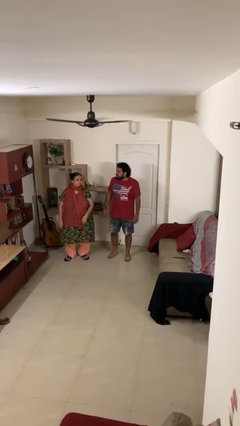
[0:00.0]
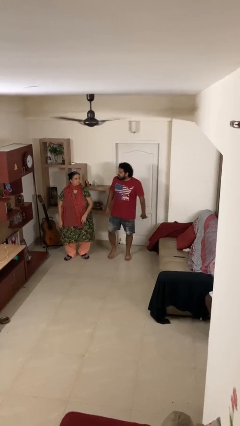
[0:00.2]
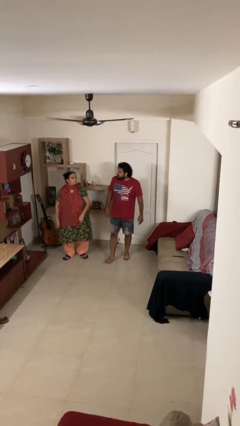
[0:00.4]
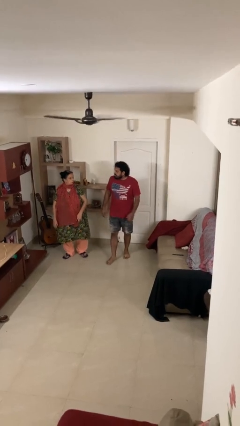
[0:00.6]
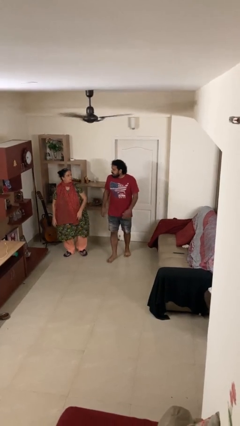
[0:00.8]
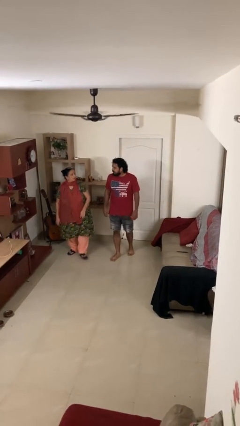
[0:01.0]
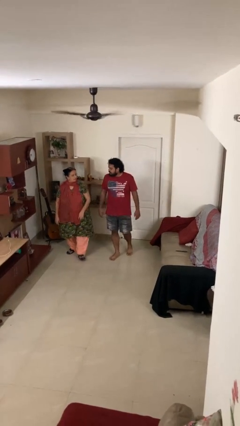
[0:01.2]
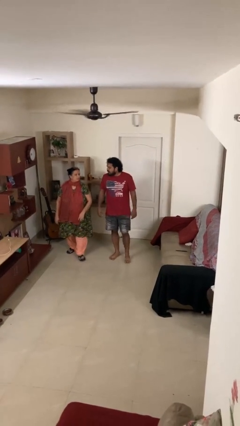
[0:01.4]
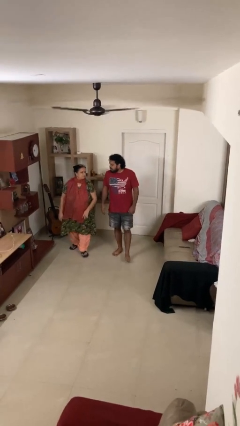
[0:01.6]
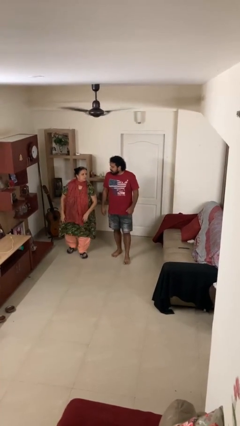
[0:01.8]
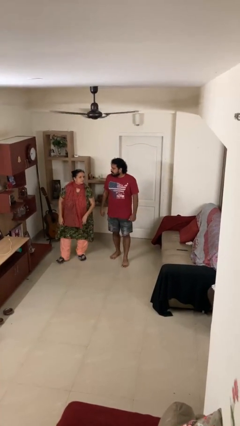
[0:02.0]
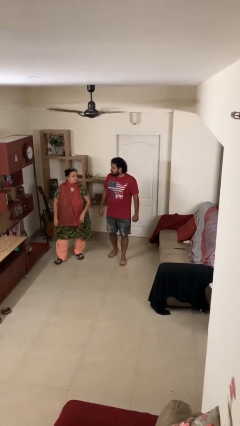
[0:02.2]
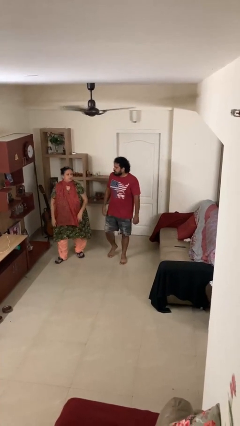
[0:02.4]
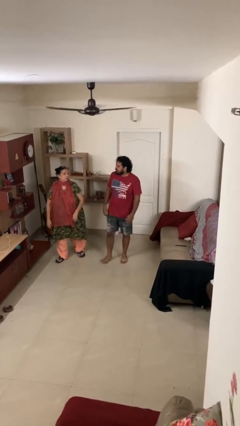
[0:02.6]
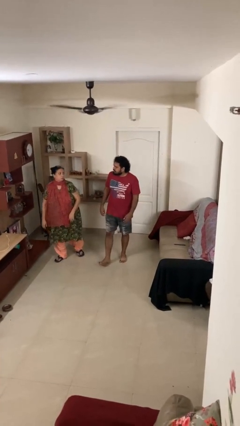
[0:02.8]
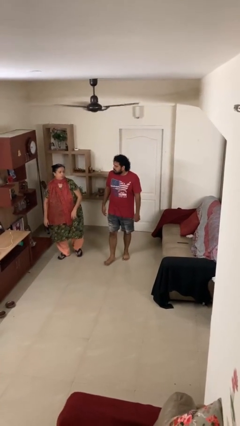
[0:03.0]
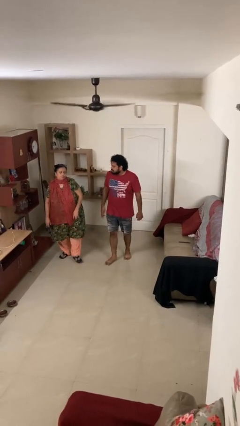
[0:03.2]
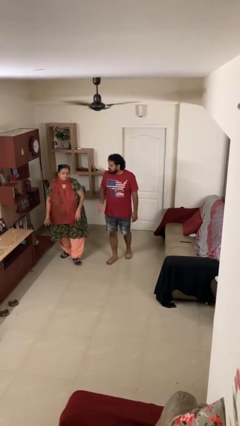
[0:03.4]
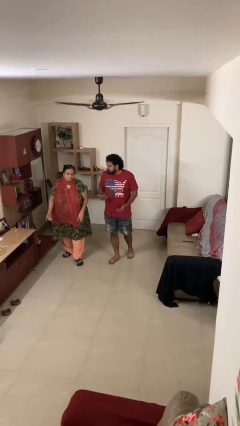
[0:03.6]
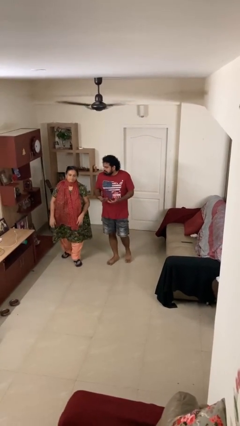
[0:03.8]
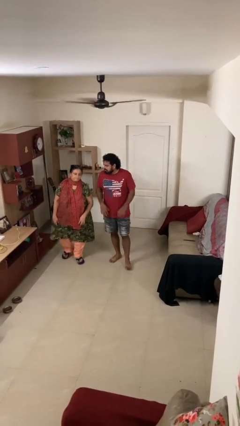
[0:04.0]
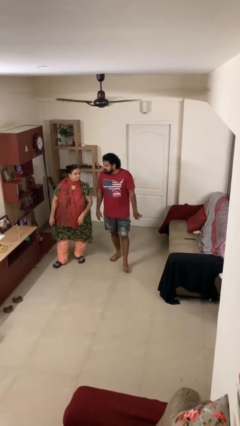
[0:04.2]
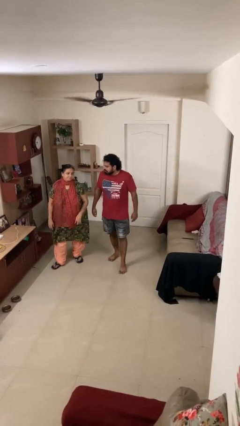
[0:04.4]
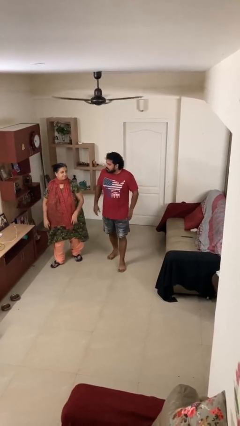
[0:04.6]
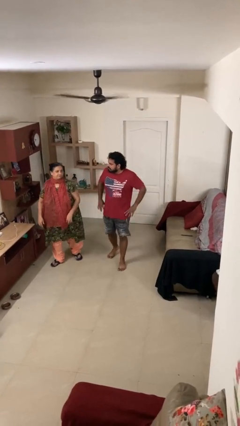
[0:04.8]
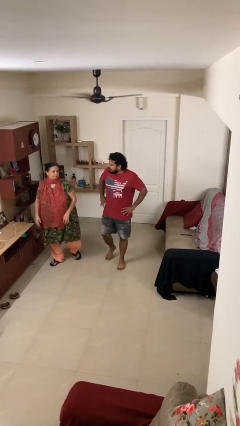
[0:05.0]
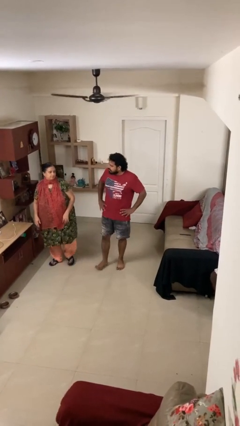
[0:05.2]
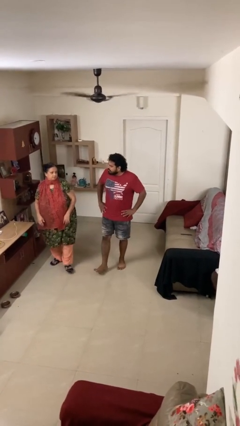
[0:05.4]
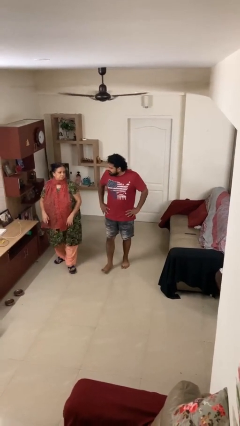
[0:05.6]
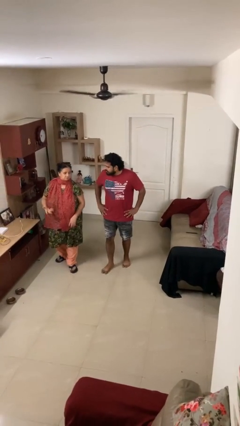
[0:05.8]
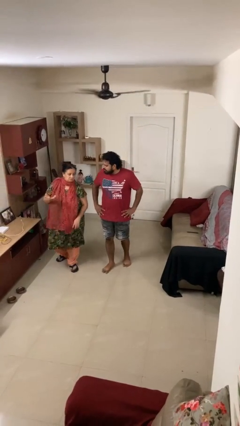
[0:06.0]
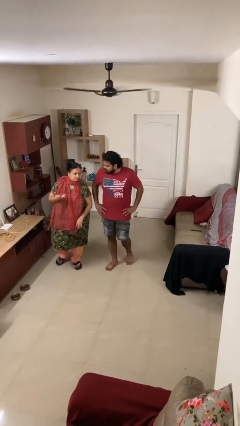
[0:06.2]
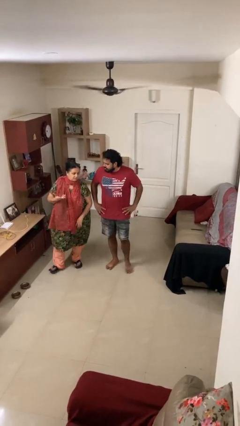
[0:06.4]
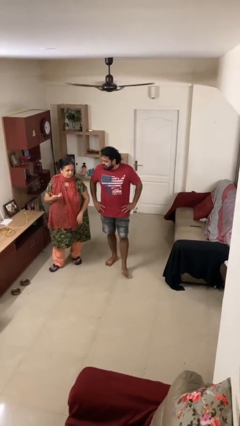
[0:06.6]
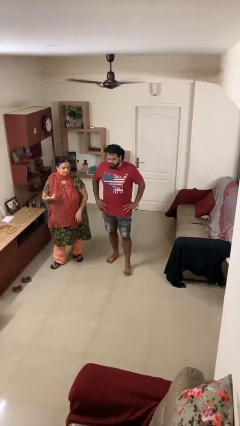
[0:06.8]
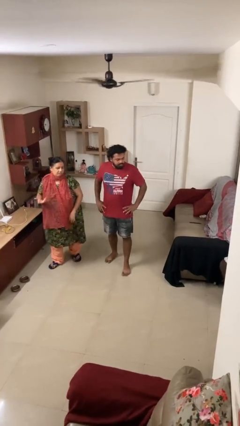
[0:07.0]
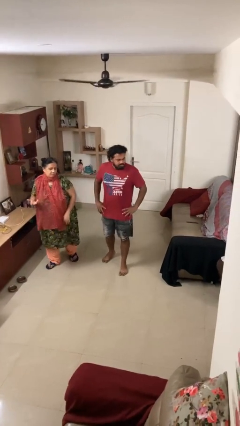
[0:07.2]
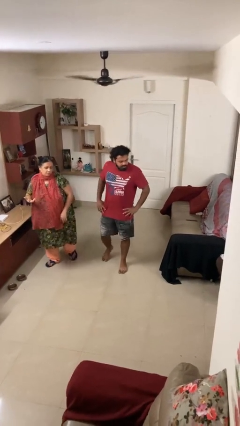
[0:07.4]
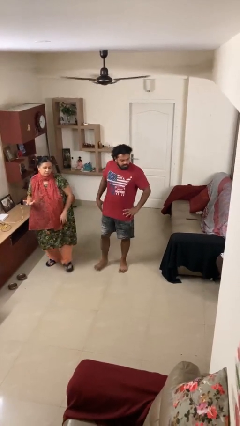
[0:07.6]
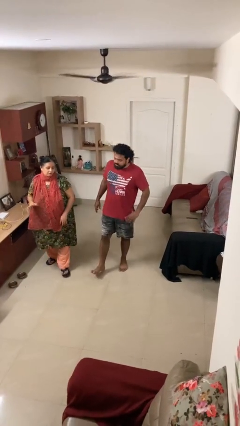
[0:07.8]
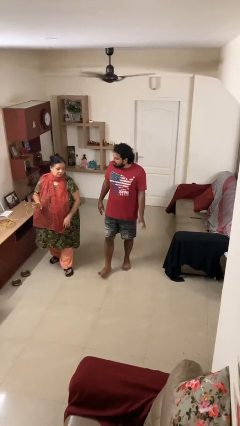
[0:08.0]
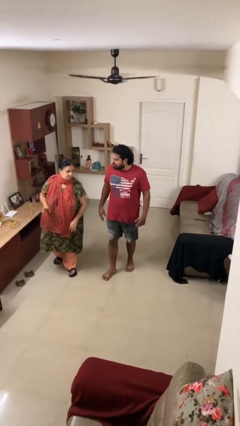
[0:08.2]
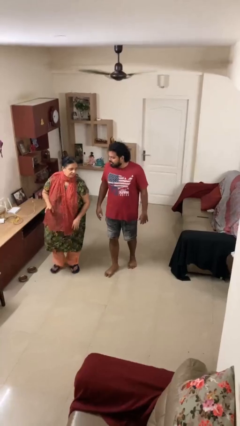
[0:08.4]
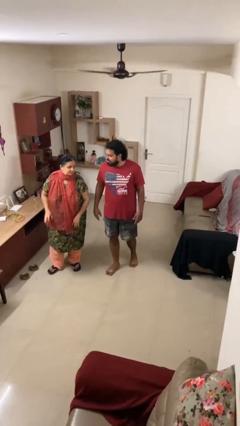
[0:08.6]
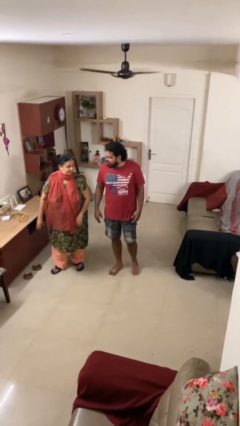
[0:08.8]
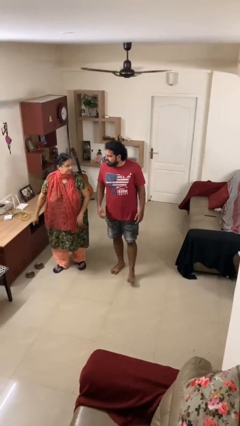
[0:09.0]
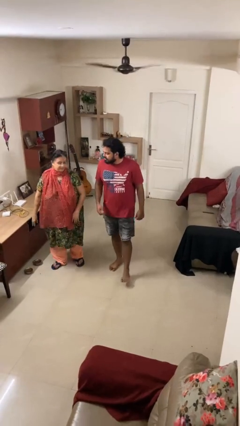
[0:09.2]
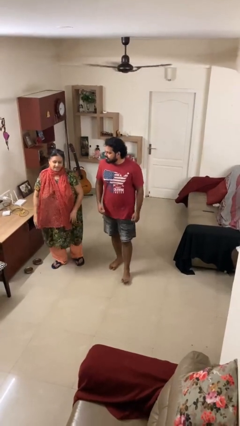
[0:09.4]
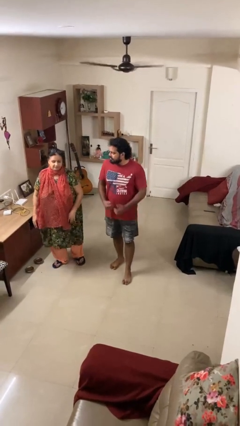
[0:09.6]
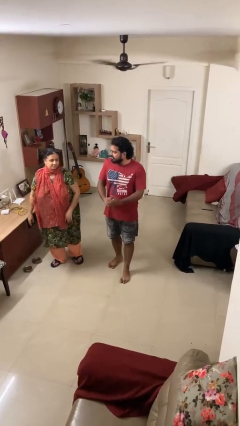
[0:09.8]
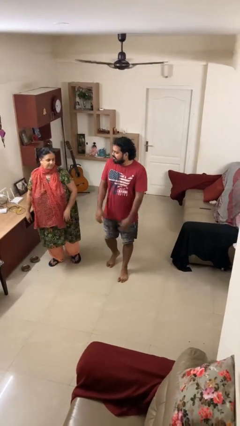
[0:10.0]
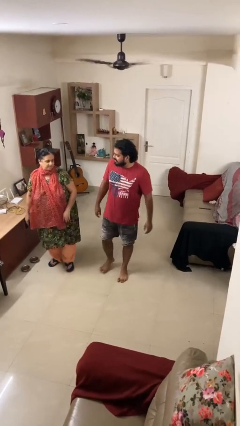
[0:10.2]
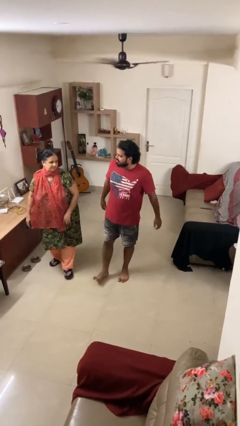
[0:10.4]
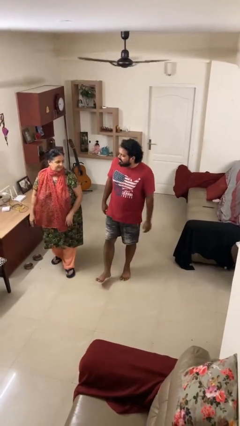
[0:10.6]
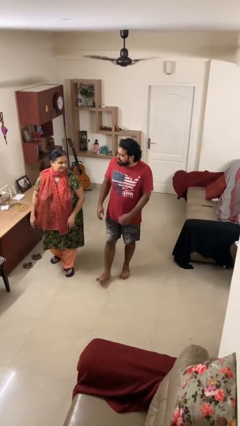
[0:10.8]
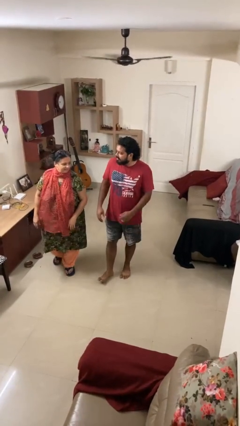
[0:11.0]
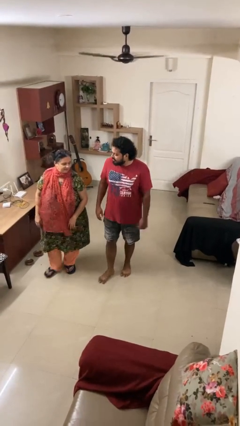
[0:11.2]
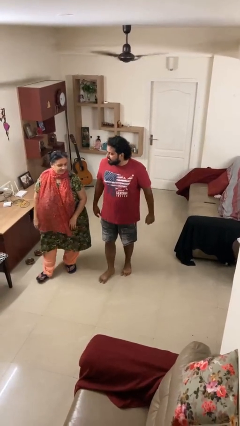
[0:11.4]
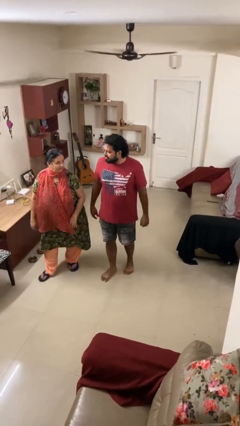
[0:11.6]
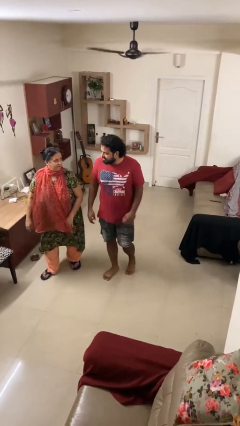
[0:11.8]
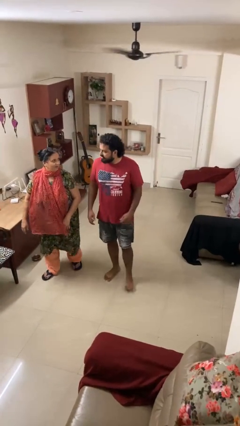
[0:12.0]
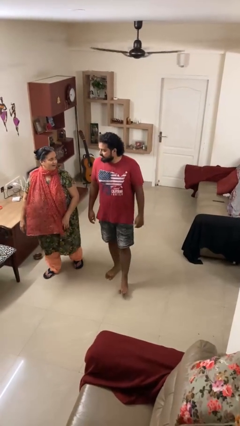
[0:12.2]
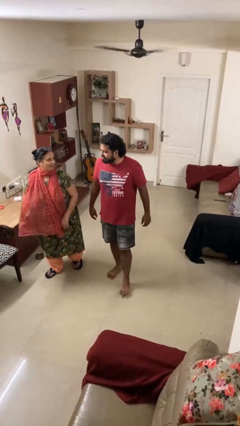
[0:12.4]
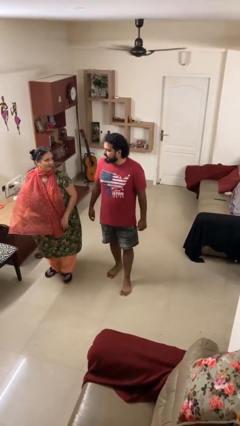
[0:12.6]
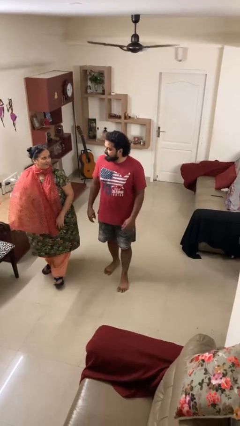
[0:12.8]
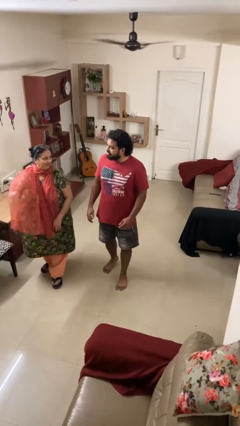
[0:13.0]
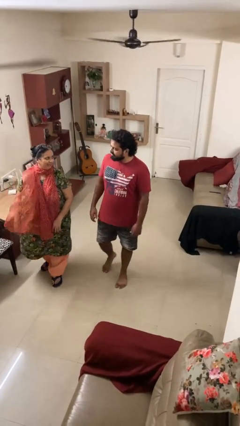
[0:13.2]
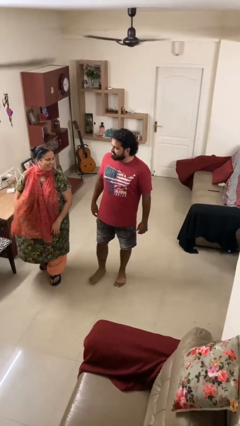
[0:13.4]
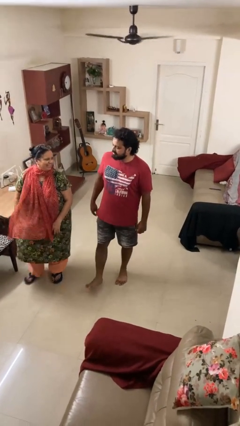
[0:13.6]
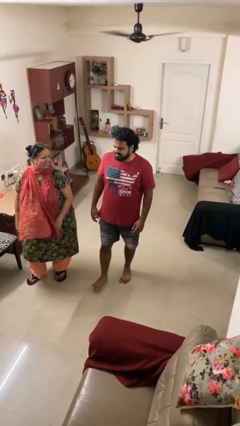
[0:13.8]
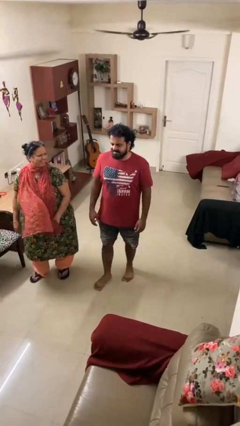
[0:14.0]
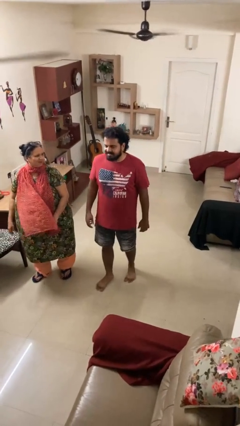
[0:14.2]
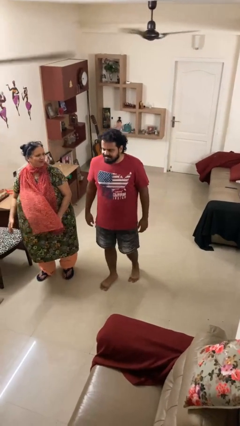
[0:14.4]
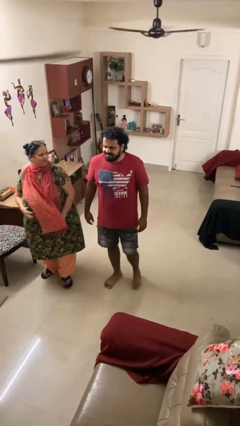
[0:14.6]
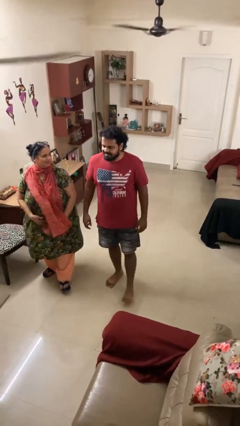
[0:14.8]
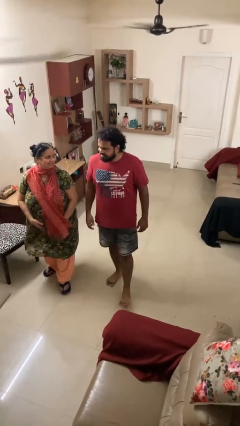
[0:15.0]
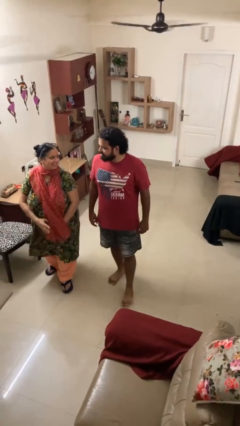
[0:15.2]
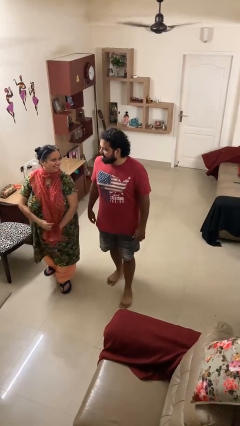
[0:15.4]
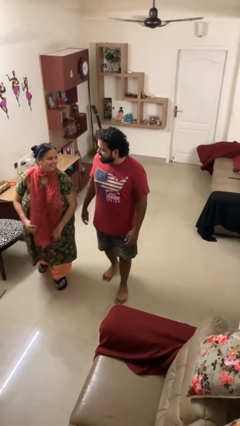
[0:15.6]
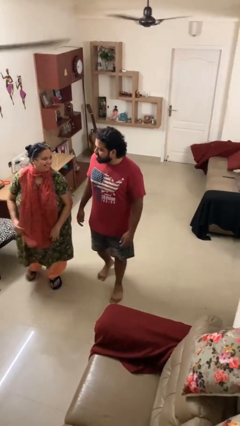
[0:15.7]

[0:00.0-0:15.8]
person talks to person

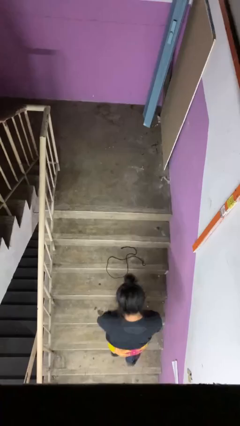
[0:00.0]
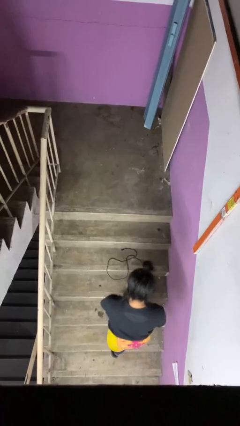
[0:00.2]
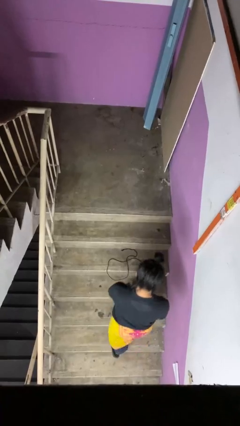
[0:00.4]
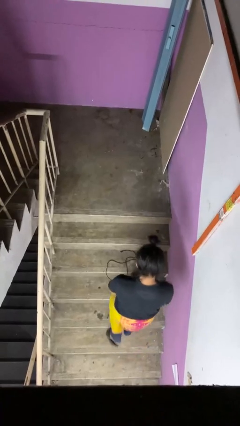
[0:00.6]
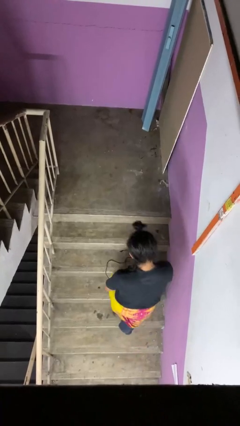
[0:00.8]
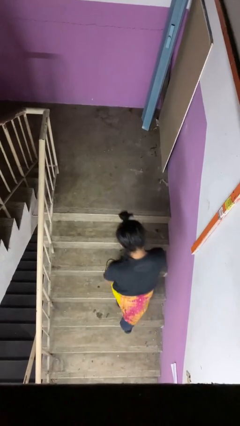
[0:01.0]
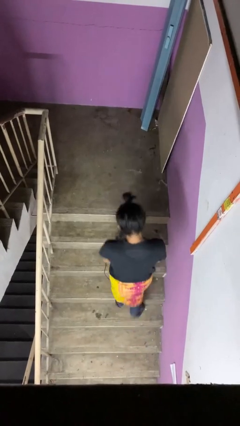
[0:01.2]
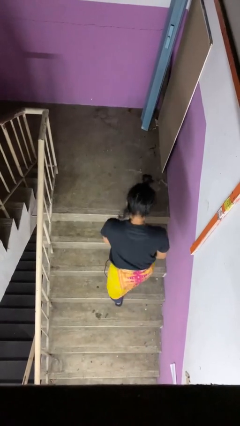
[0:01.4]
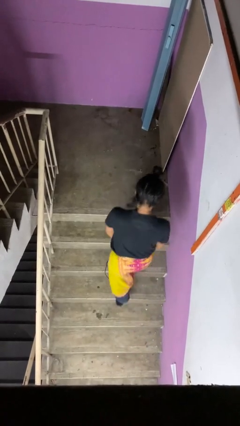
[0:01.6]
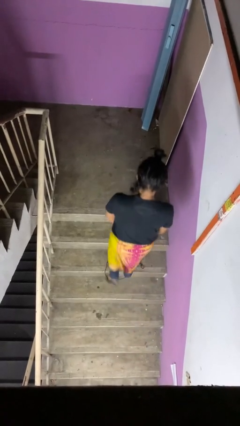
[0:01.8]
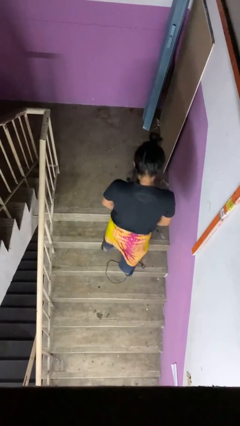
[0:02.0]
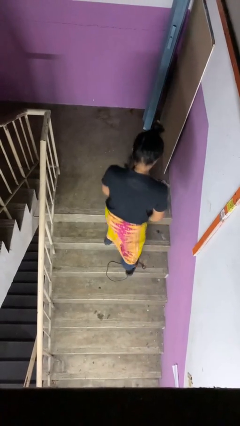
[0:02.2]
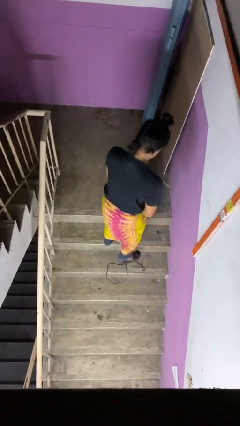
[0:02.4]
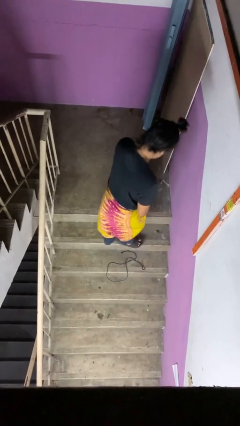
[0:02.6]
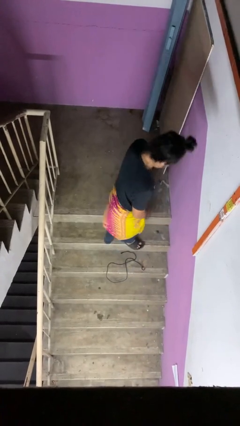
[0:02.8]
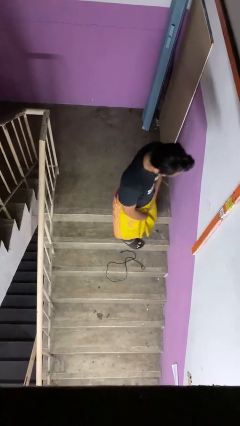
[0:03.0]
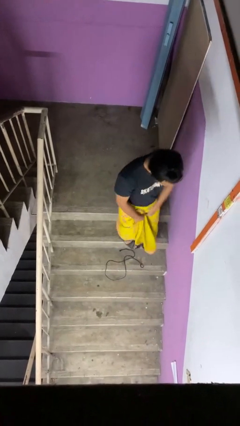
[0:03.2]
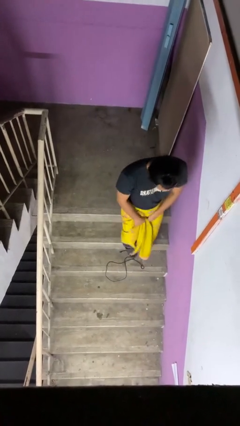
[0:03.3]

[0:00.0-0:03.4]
person climbs up stairs
